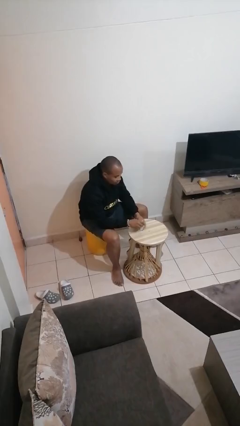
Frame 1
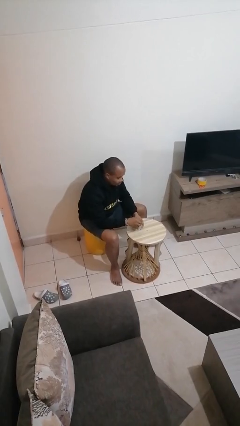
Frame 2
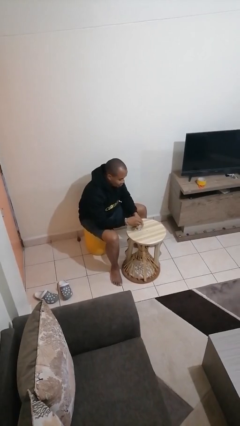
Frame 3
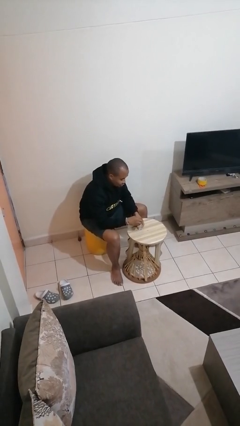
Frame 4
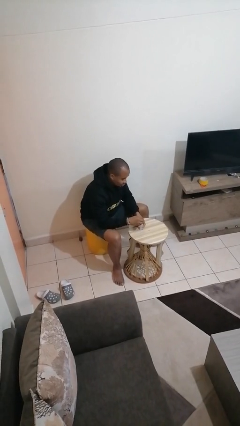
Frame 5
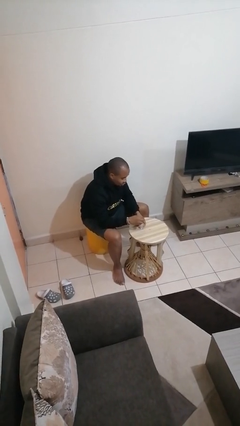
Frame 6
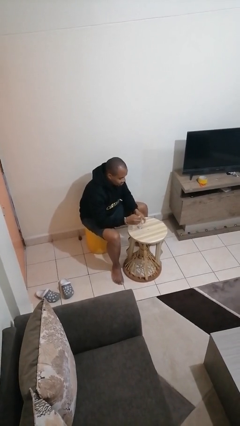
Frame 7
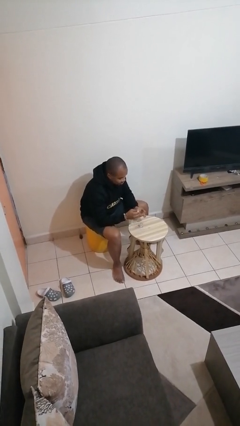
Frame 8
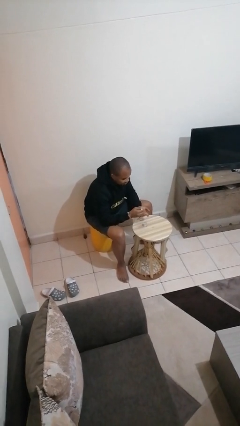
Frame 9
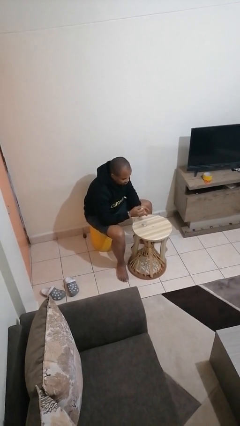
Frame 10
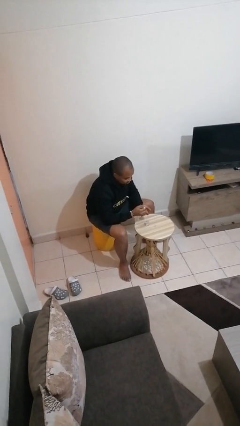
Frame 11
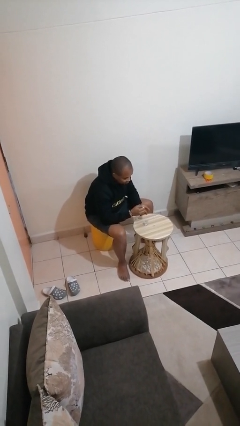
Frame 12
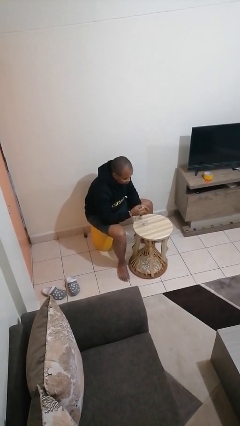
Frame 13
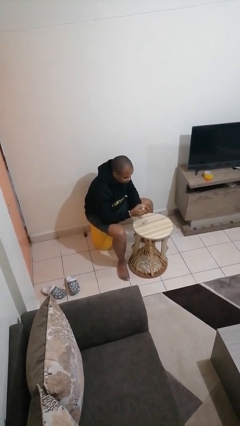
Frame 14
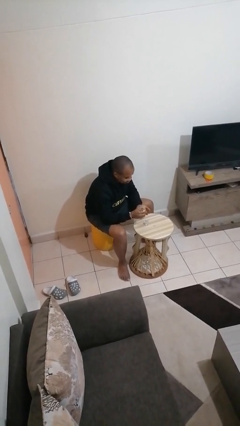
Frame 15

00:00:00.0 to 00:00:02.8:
person paints fingernails

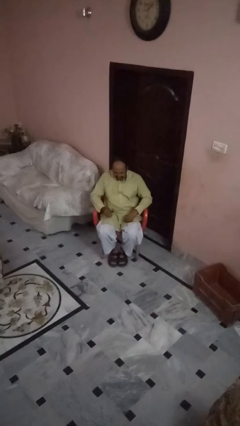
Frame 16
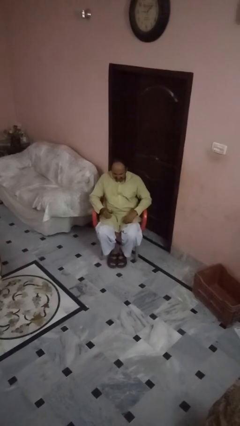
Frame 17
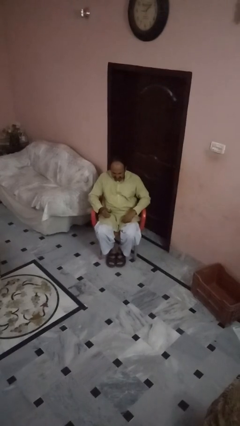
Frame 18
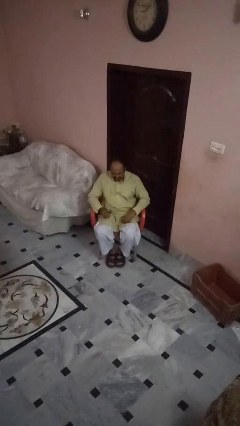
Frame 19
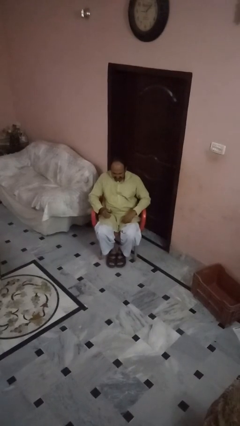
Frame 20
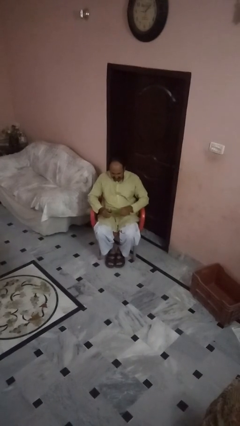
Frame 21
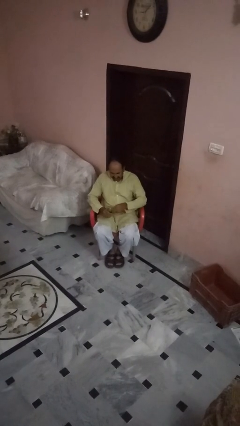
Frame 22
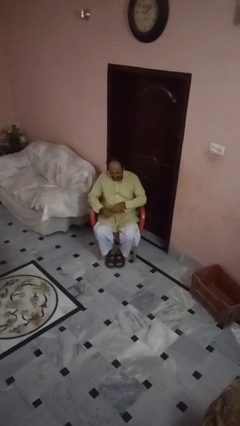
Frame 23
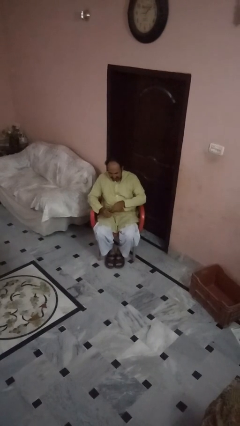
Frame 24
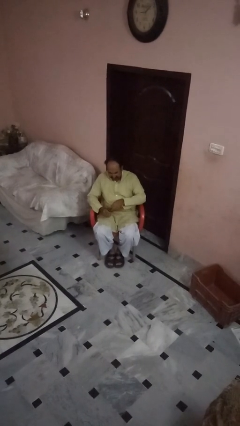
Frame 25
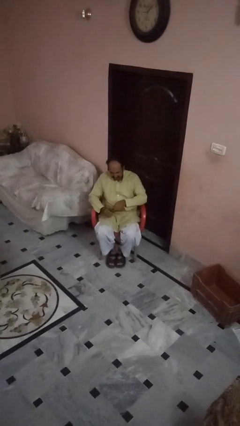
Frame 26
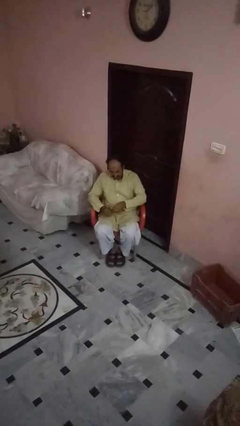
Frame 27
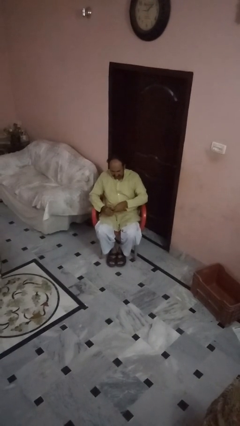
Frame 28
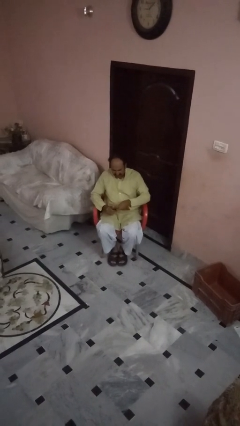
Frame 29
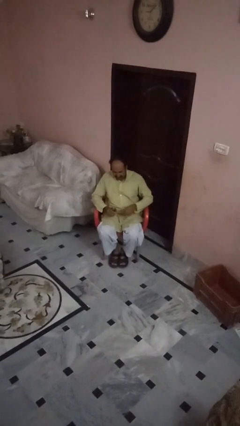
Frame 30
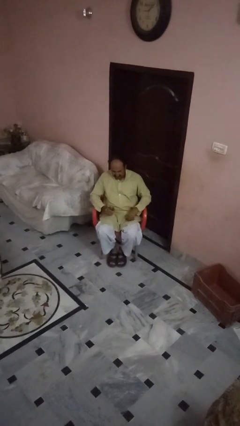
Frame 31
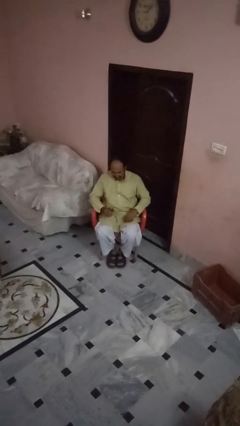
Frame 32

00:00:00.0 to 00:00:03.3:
person opens beverage can

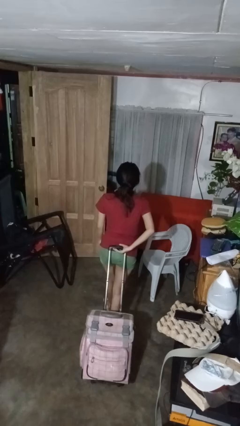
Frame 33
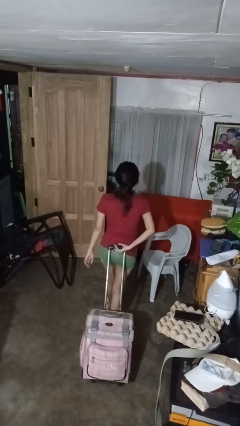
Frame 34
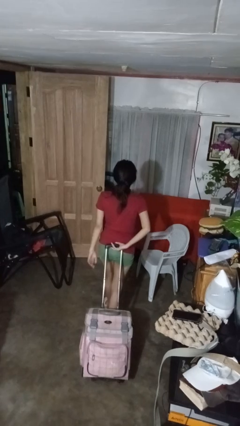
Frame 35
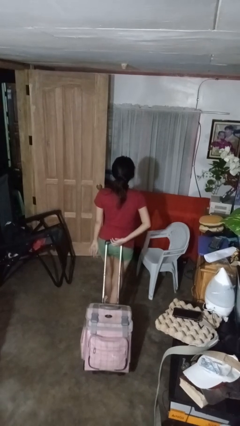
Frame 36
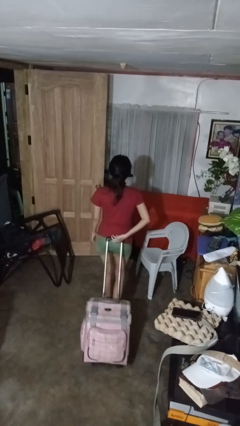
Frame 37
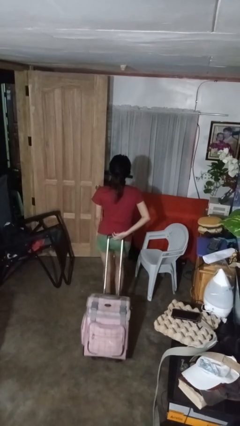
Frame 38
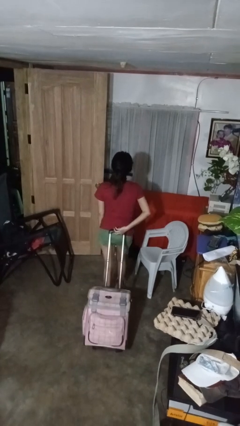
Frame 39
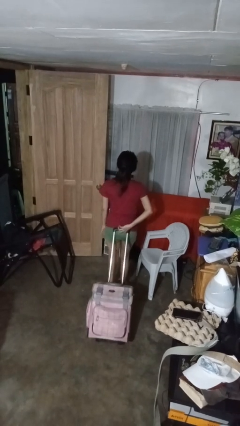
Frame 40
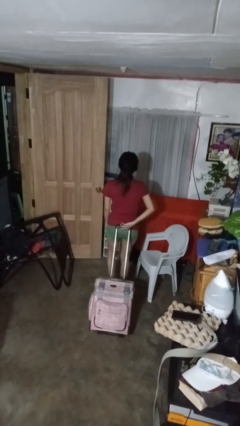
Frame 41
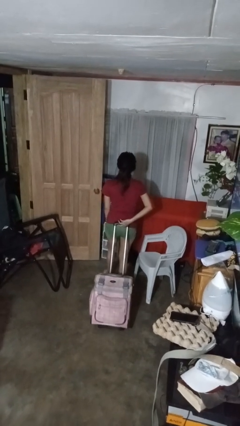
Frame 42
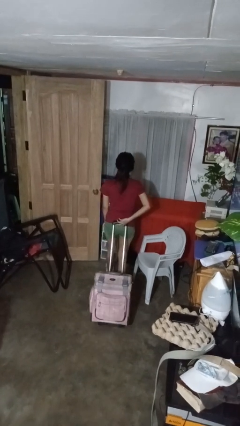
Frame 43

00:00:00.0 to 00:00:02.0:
person pulls wheeled cart

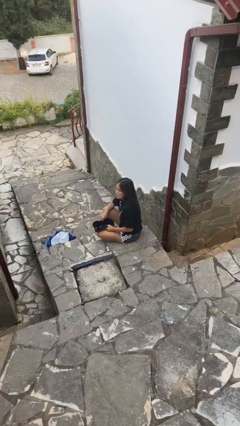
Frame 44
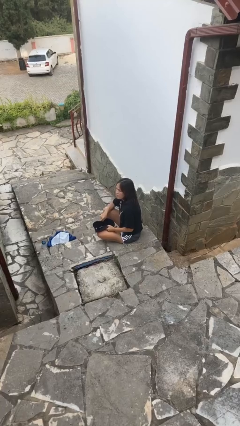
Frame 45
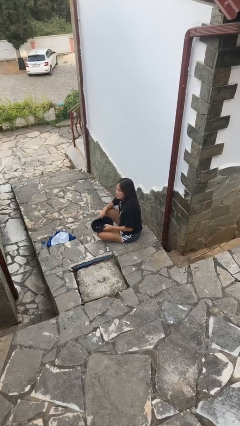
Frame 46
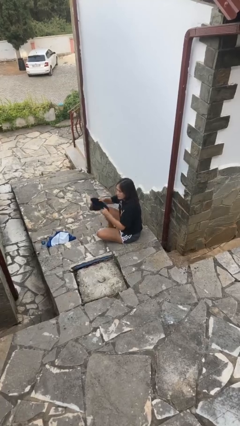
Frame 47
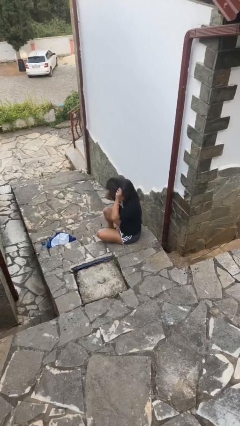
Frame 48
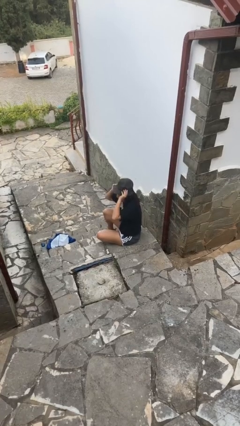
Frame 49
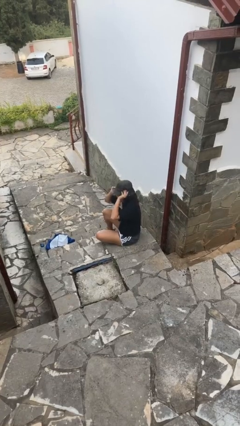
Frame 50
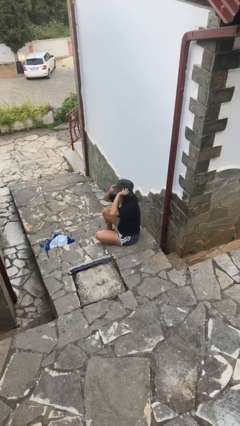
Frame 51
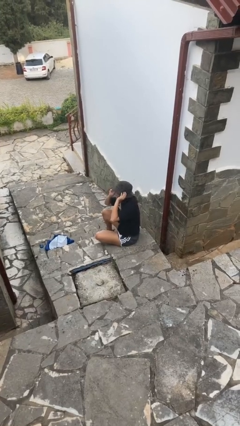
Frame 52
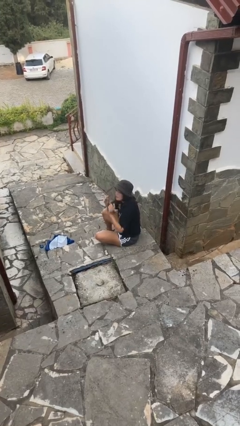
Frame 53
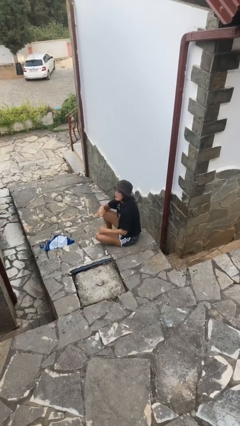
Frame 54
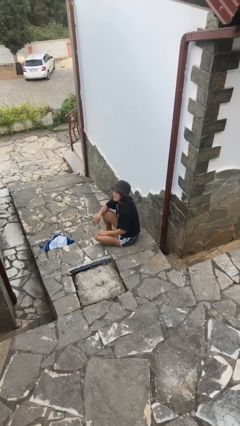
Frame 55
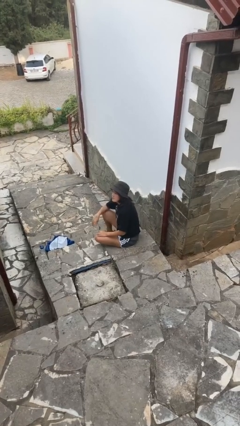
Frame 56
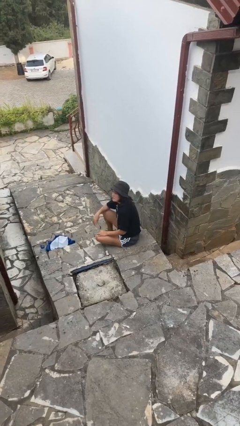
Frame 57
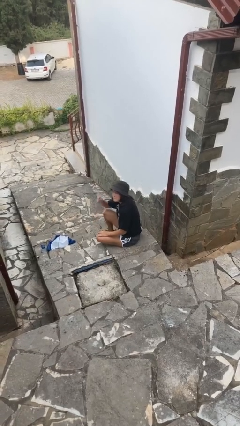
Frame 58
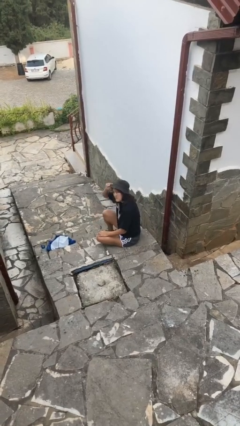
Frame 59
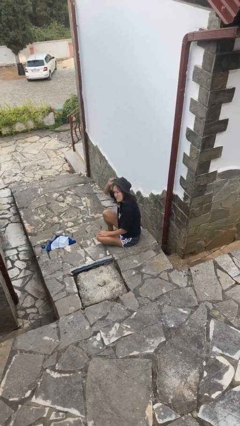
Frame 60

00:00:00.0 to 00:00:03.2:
person puts on hat

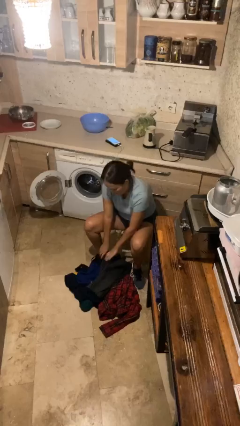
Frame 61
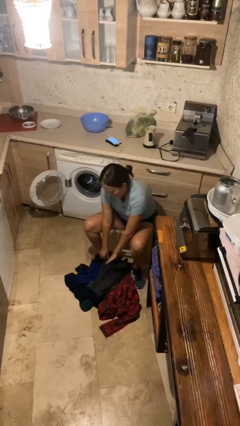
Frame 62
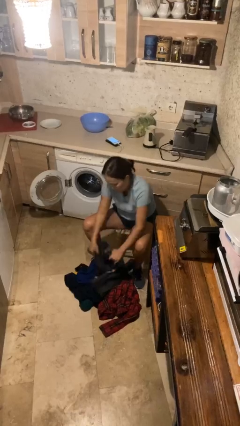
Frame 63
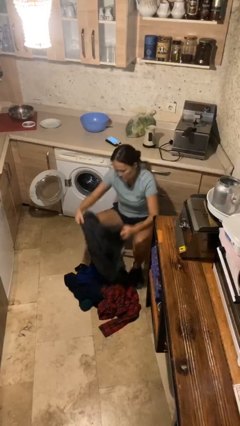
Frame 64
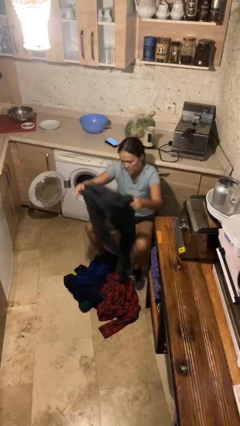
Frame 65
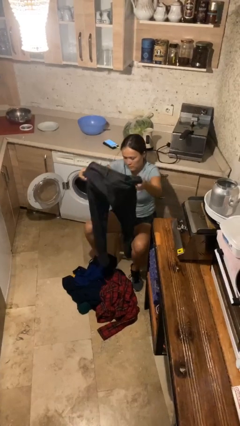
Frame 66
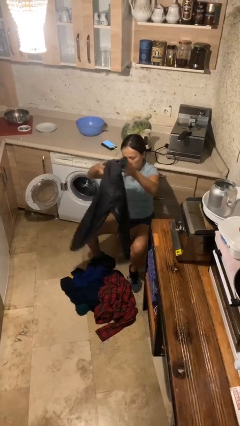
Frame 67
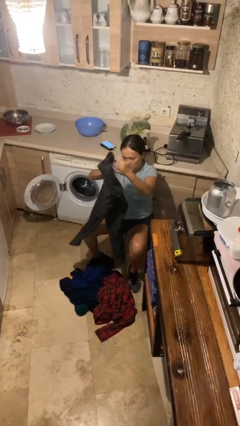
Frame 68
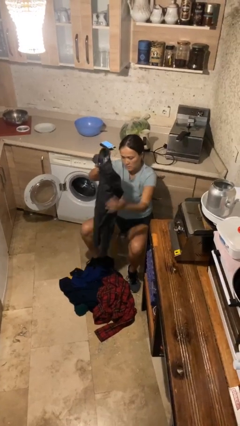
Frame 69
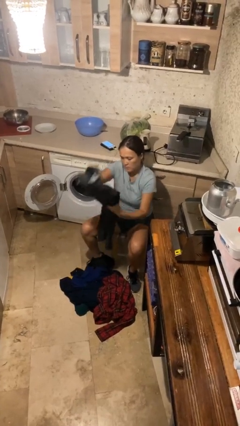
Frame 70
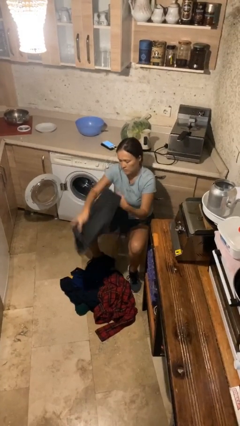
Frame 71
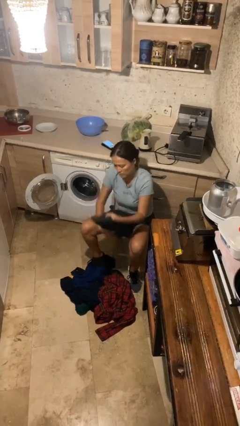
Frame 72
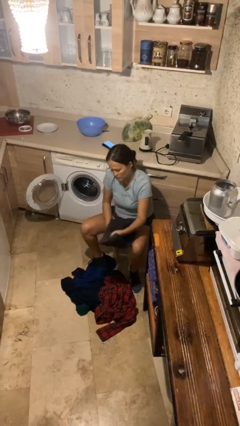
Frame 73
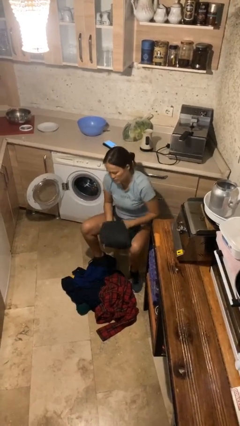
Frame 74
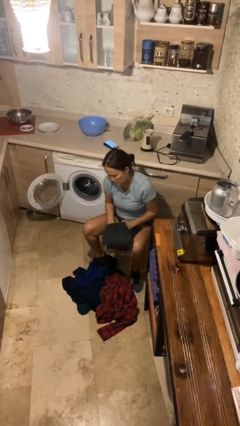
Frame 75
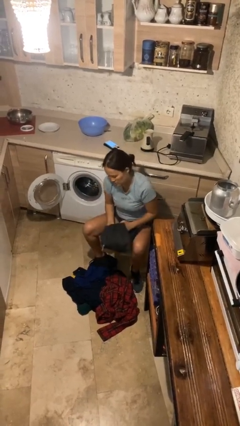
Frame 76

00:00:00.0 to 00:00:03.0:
person folds pants

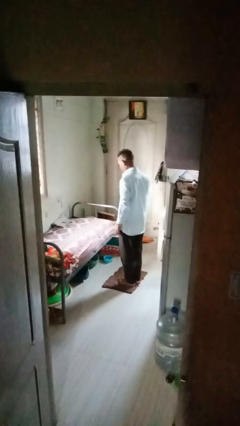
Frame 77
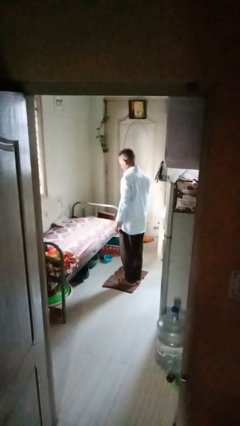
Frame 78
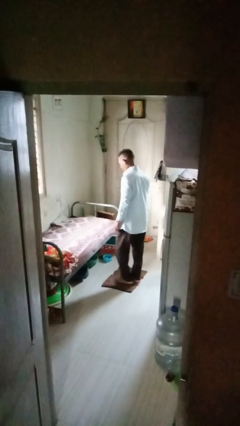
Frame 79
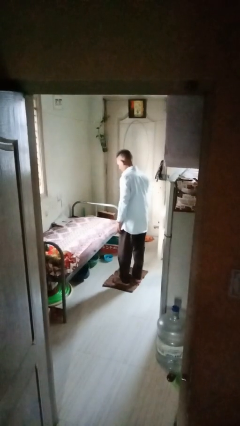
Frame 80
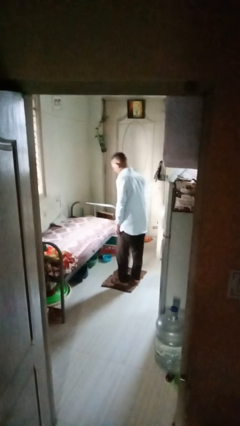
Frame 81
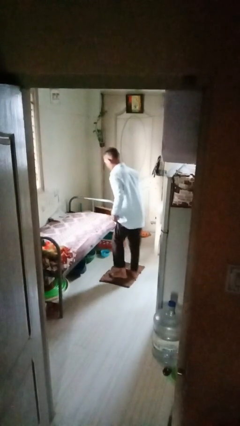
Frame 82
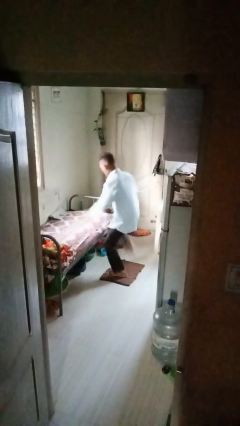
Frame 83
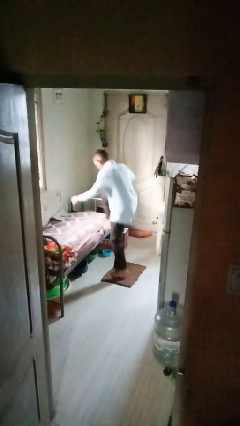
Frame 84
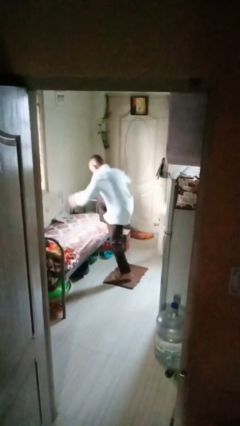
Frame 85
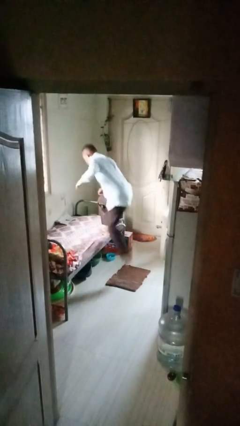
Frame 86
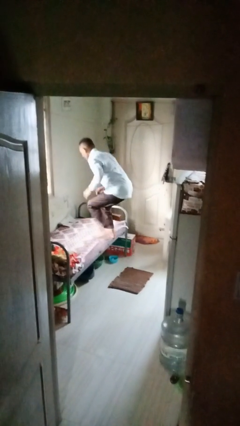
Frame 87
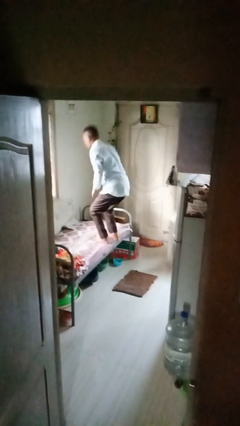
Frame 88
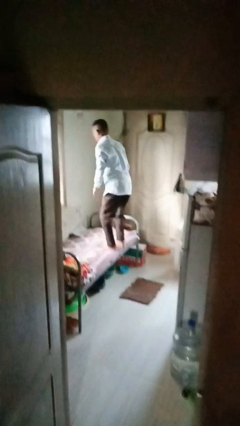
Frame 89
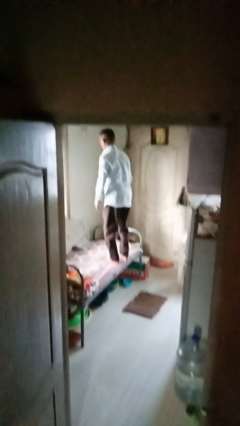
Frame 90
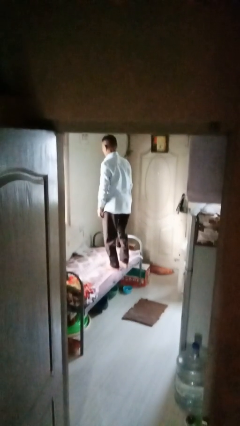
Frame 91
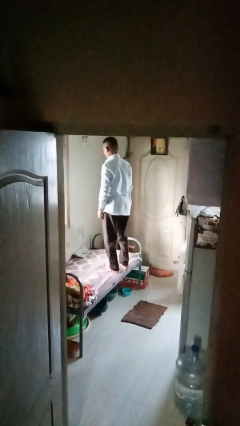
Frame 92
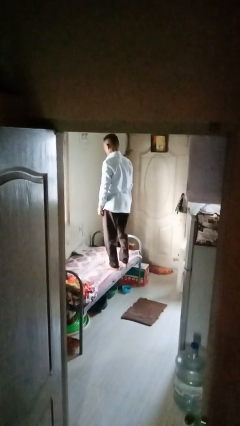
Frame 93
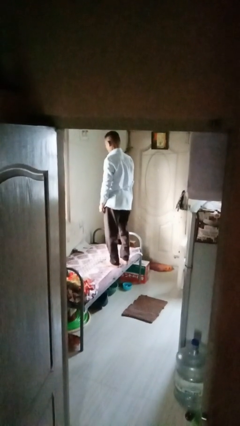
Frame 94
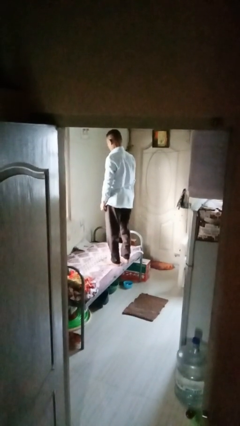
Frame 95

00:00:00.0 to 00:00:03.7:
person jumps on bed
